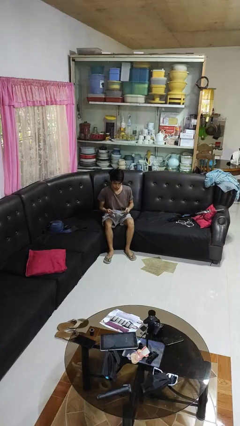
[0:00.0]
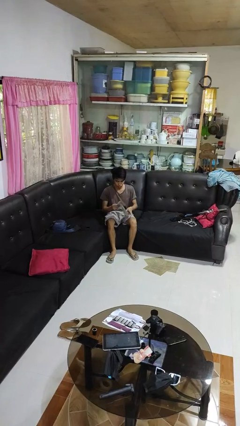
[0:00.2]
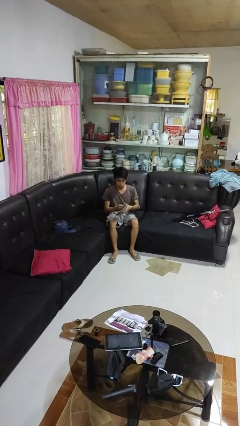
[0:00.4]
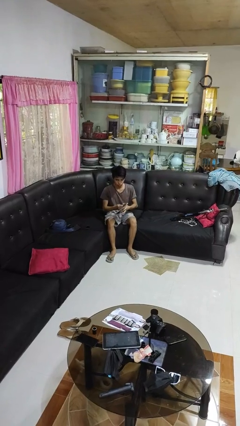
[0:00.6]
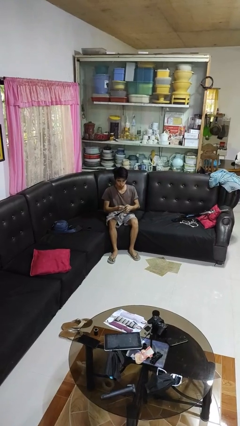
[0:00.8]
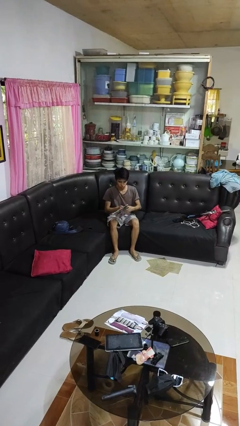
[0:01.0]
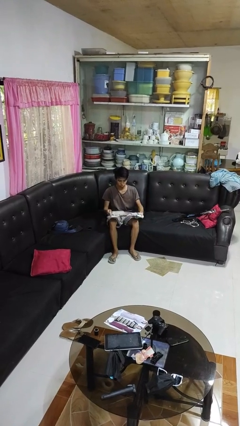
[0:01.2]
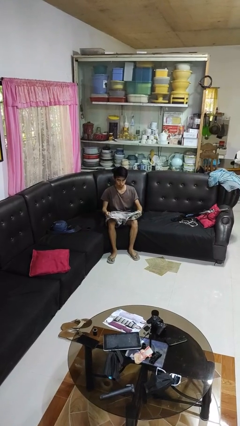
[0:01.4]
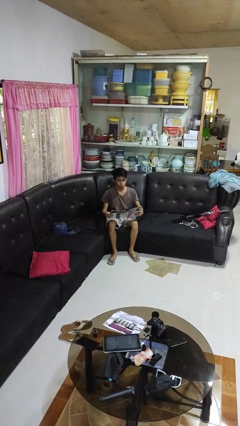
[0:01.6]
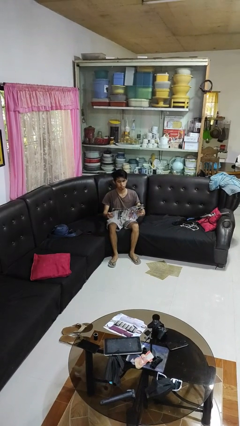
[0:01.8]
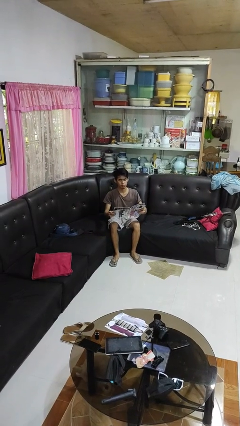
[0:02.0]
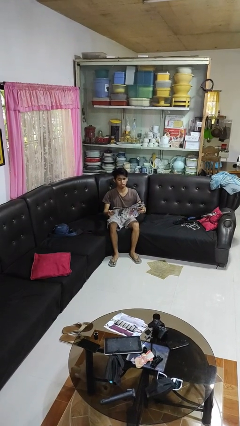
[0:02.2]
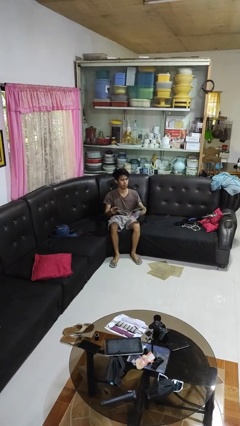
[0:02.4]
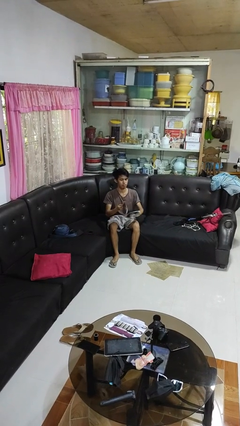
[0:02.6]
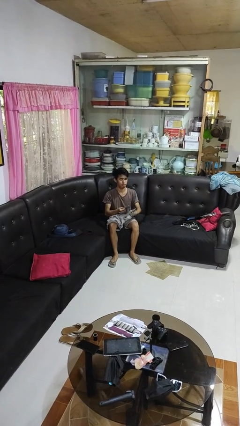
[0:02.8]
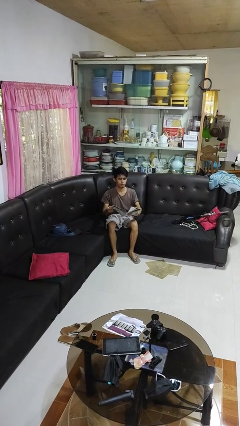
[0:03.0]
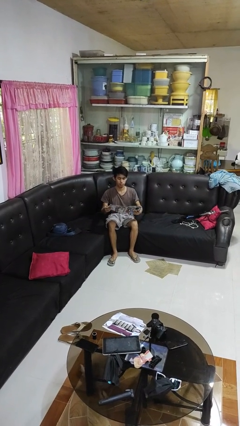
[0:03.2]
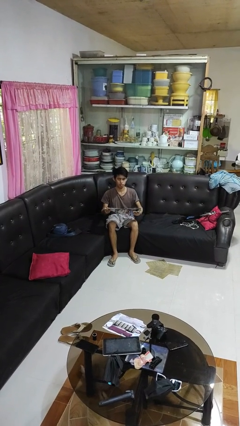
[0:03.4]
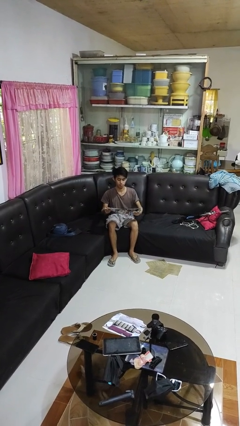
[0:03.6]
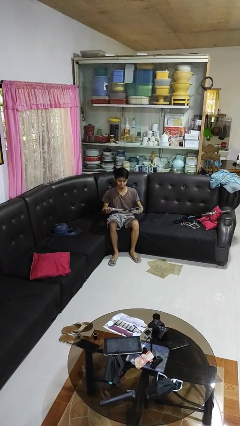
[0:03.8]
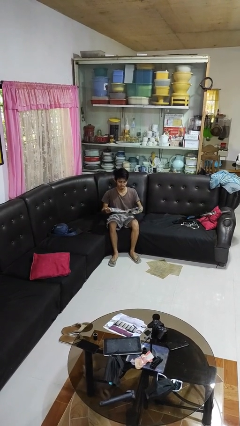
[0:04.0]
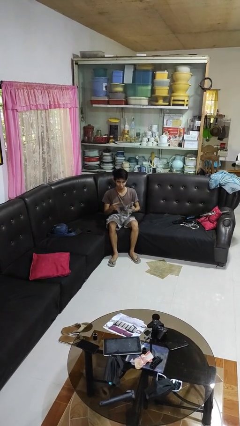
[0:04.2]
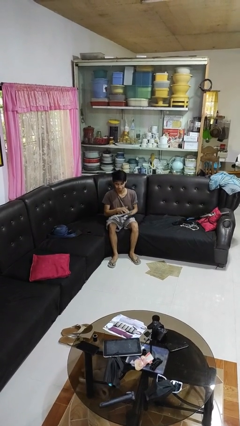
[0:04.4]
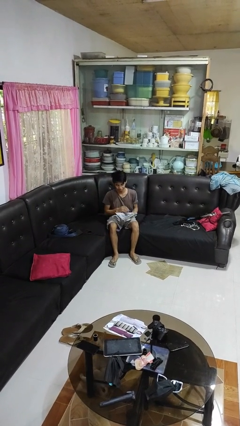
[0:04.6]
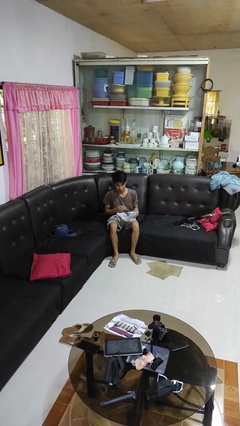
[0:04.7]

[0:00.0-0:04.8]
person reads magazine

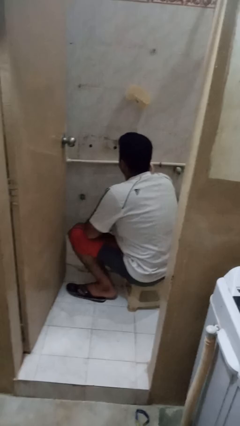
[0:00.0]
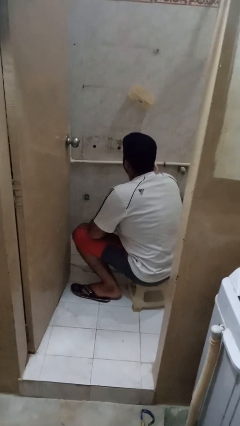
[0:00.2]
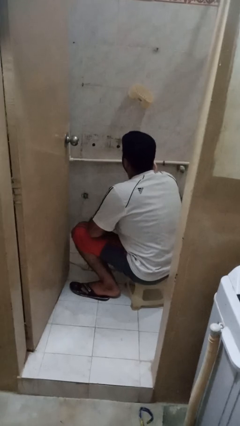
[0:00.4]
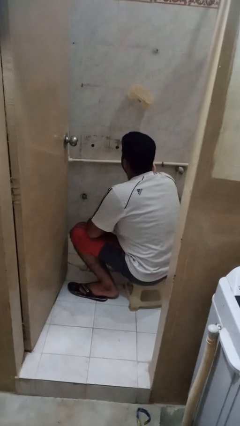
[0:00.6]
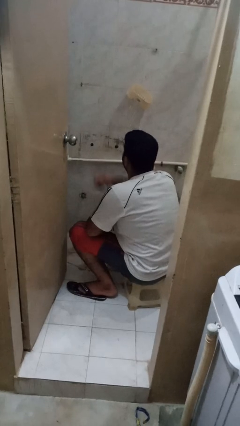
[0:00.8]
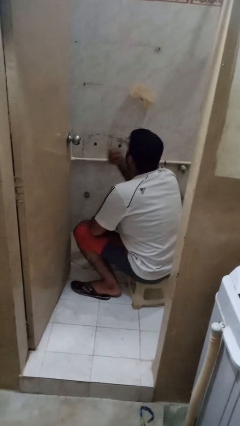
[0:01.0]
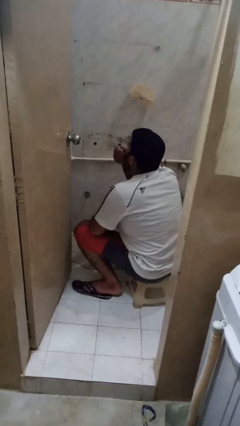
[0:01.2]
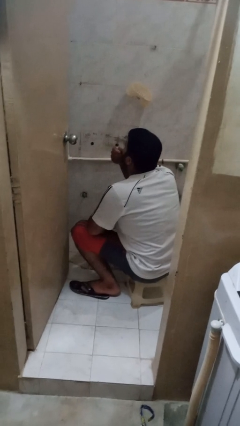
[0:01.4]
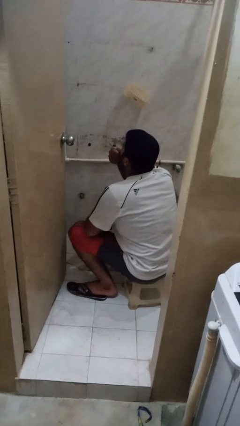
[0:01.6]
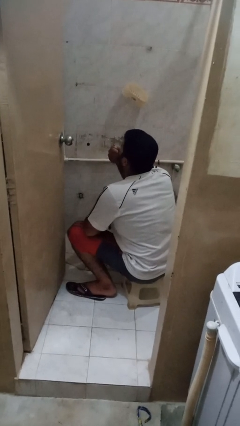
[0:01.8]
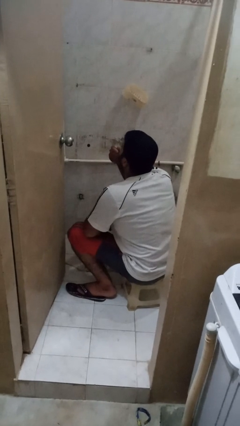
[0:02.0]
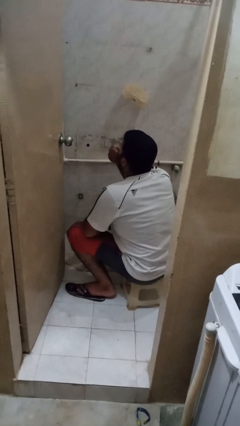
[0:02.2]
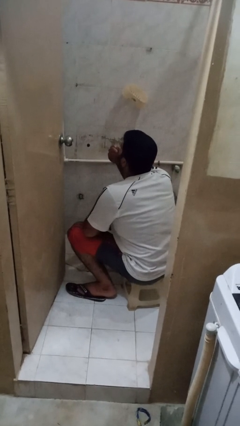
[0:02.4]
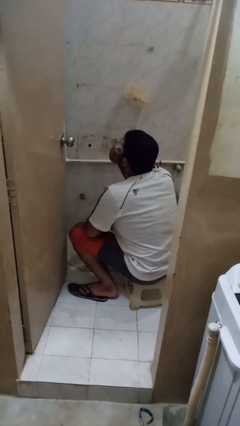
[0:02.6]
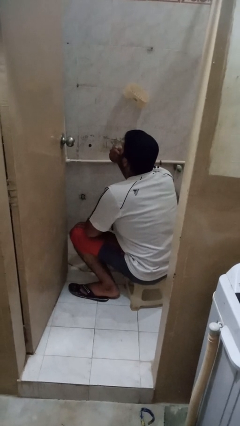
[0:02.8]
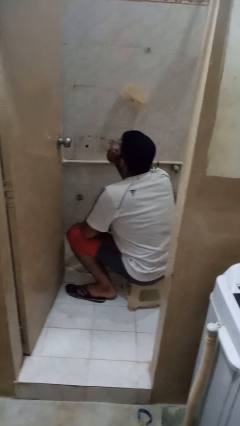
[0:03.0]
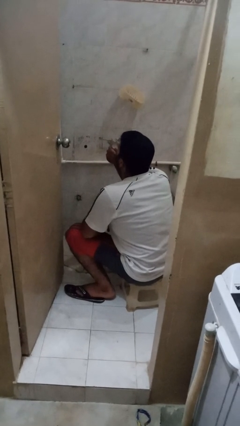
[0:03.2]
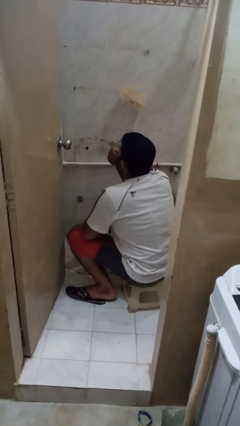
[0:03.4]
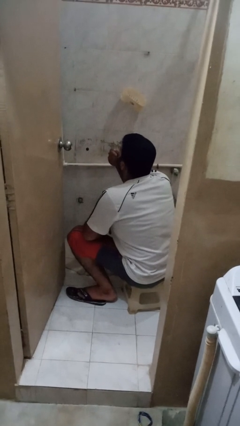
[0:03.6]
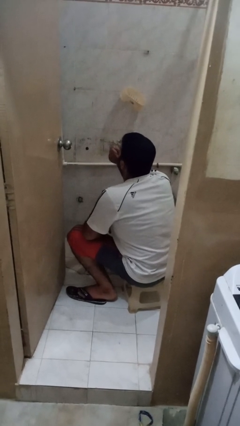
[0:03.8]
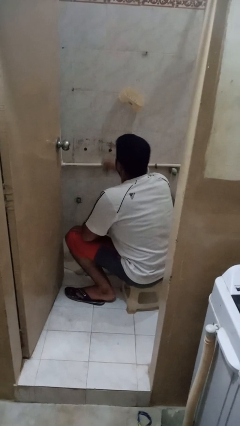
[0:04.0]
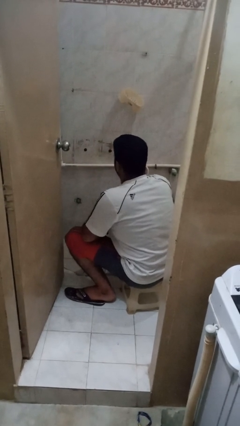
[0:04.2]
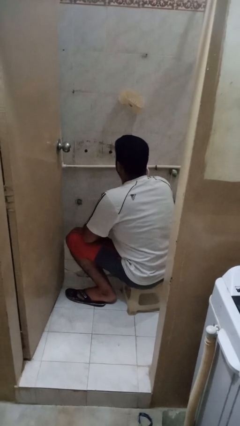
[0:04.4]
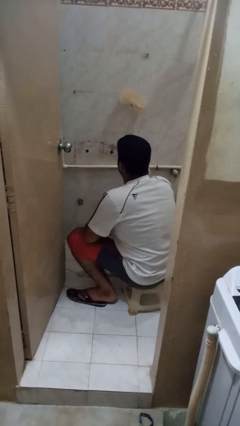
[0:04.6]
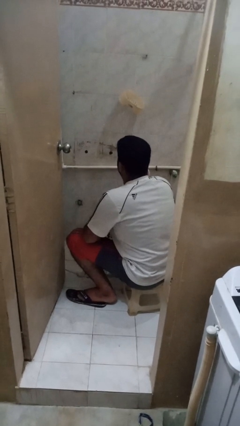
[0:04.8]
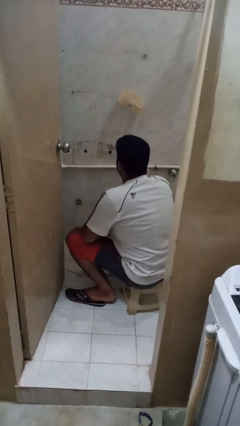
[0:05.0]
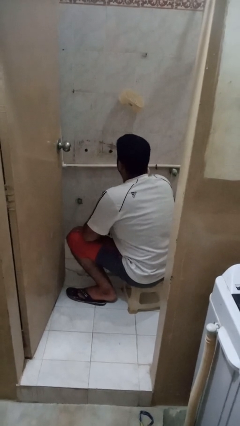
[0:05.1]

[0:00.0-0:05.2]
person flosses

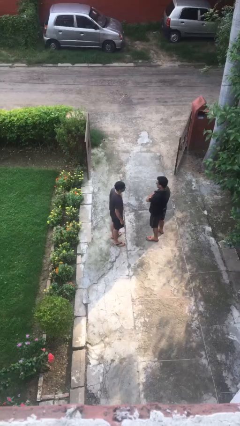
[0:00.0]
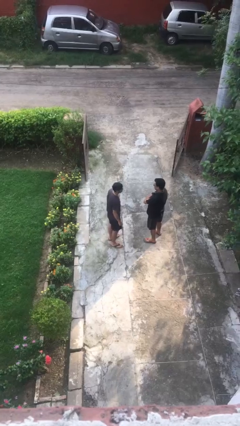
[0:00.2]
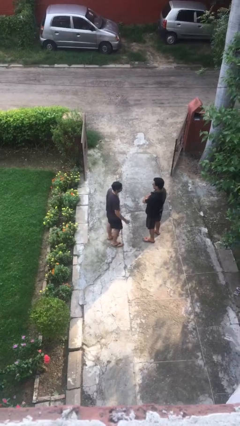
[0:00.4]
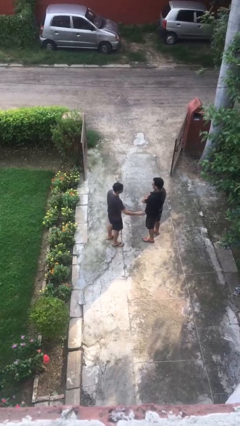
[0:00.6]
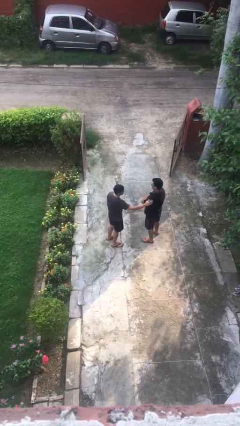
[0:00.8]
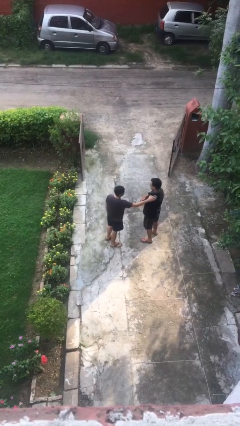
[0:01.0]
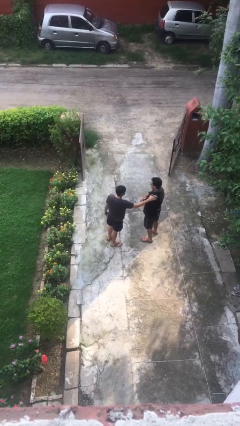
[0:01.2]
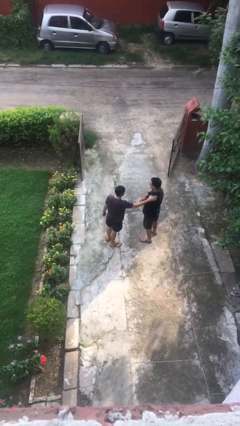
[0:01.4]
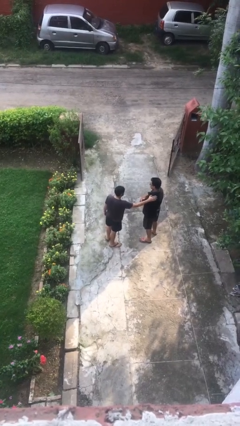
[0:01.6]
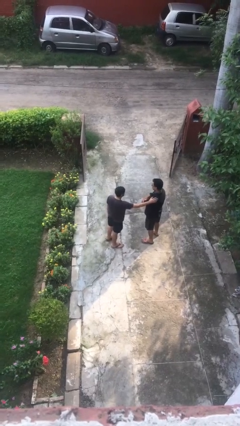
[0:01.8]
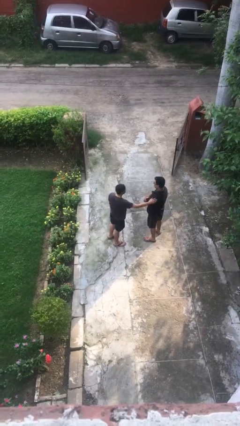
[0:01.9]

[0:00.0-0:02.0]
person pounds shoulders of person

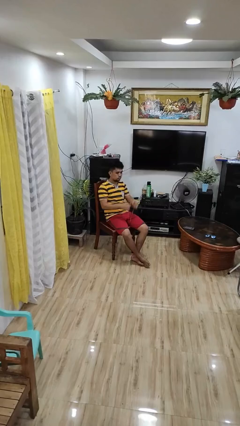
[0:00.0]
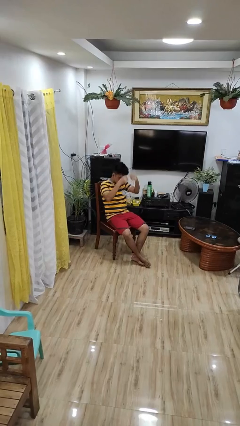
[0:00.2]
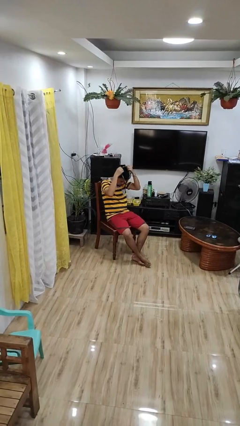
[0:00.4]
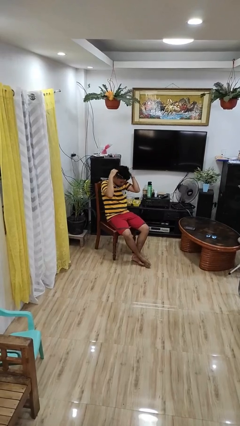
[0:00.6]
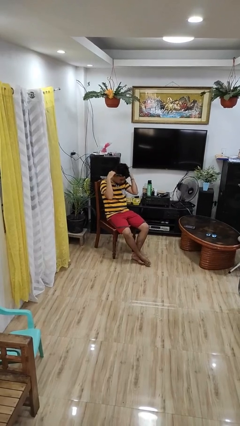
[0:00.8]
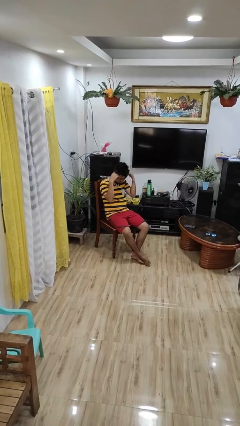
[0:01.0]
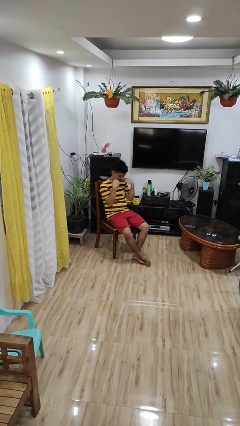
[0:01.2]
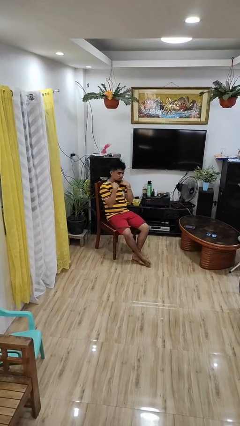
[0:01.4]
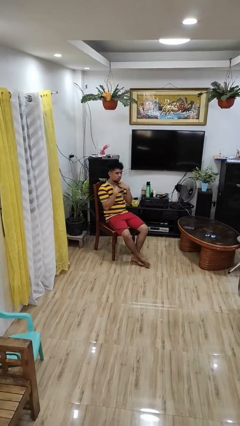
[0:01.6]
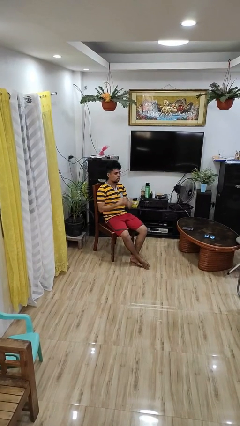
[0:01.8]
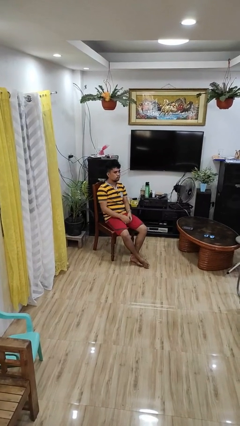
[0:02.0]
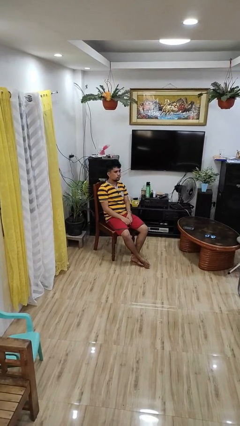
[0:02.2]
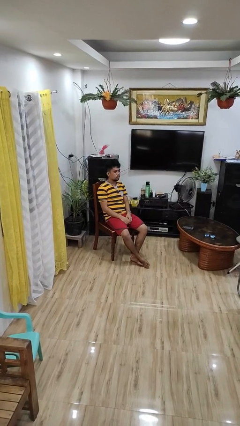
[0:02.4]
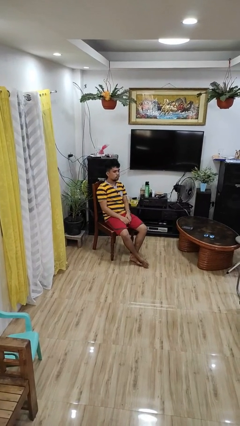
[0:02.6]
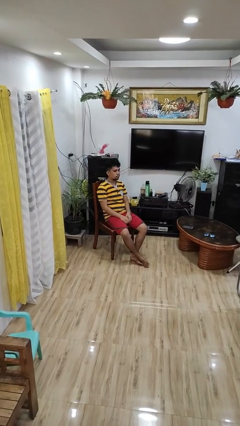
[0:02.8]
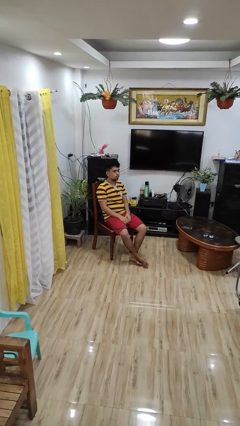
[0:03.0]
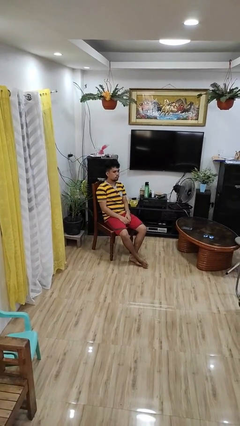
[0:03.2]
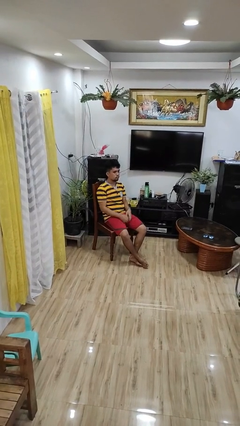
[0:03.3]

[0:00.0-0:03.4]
person puts on necklace

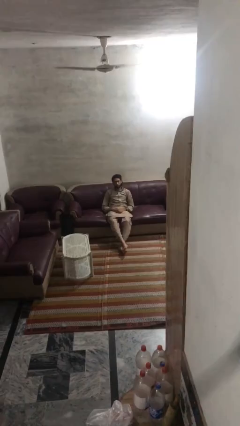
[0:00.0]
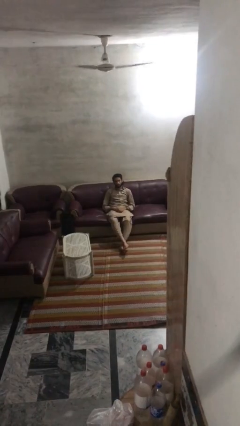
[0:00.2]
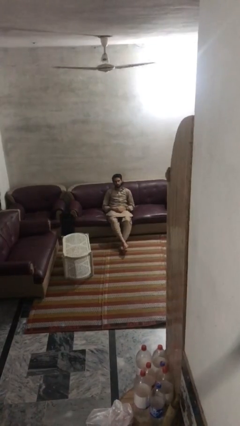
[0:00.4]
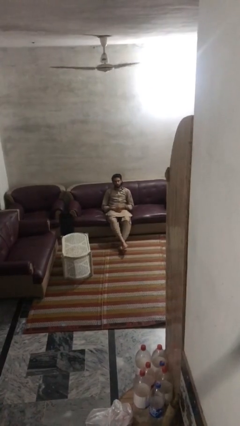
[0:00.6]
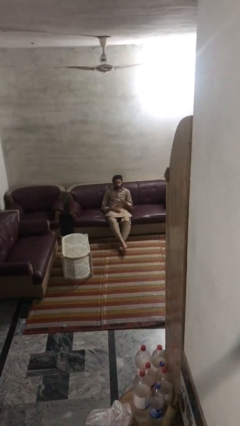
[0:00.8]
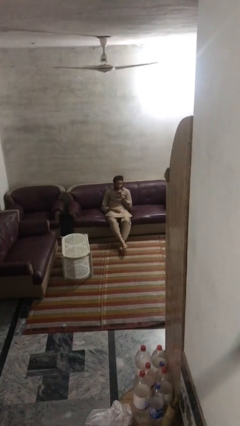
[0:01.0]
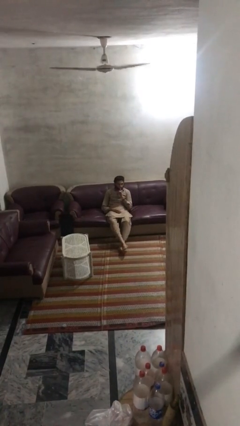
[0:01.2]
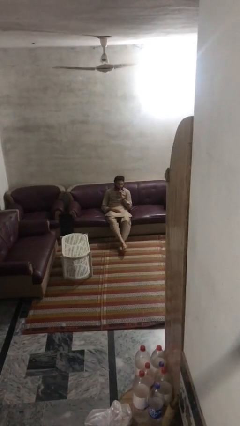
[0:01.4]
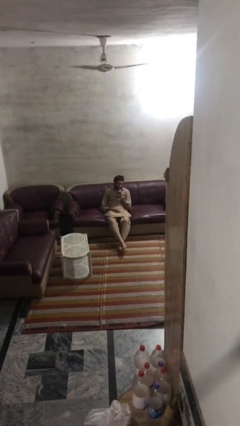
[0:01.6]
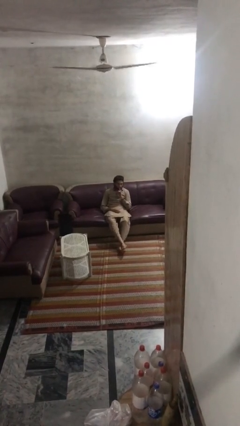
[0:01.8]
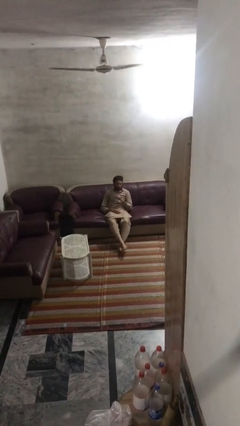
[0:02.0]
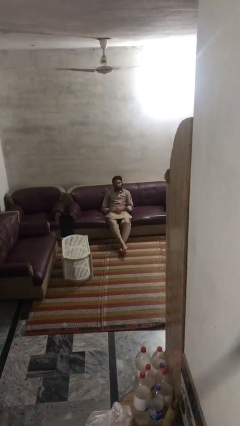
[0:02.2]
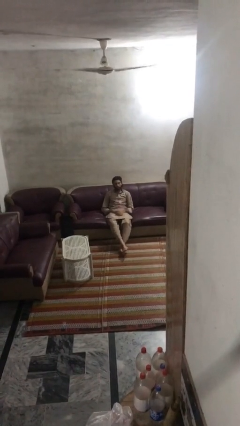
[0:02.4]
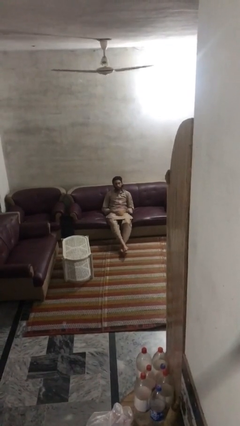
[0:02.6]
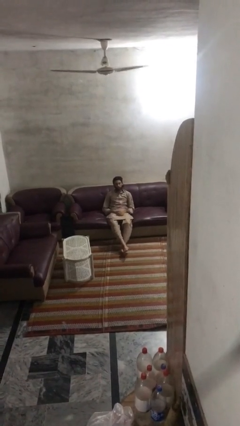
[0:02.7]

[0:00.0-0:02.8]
person gestures be quiet
